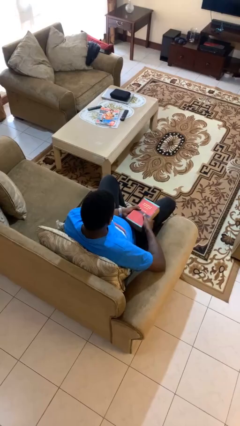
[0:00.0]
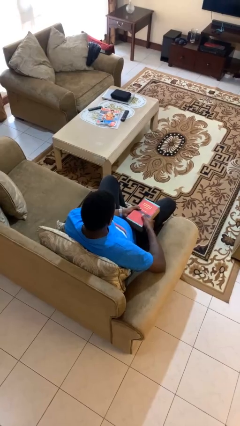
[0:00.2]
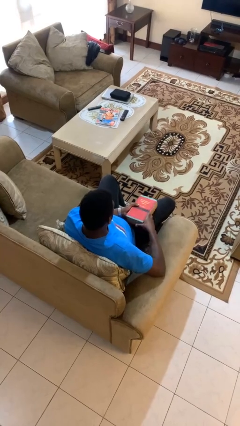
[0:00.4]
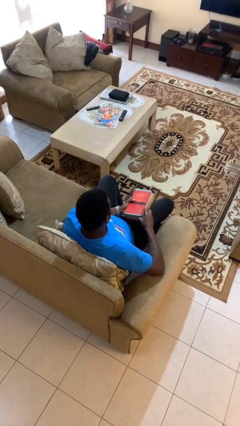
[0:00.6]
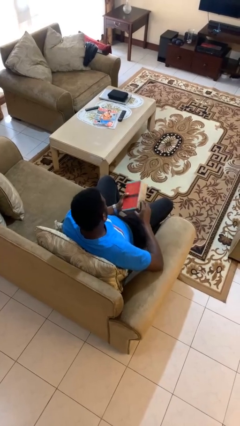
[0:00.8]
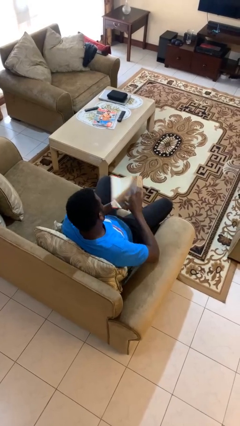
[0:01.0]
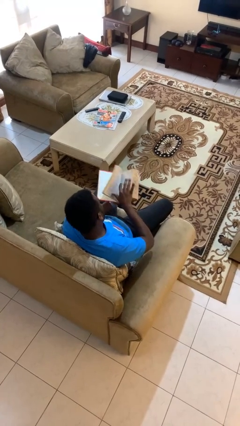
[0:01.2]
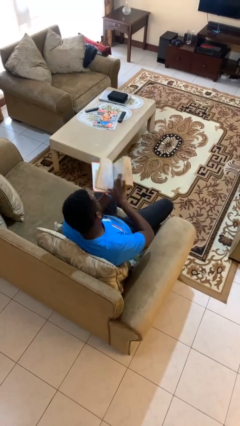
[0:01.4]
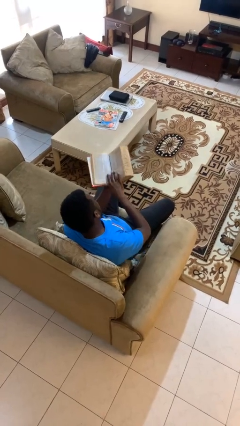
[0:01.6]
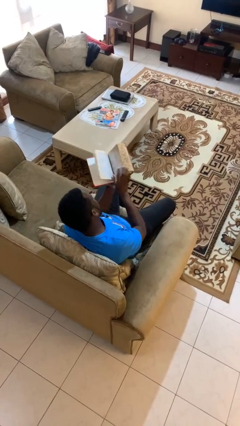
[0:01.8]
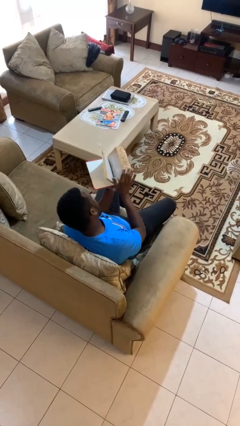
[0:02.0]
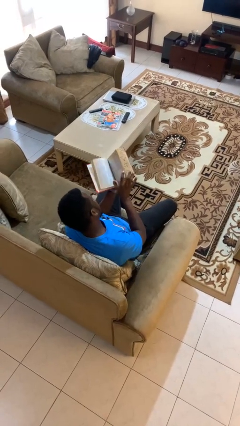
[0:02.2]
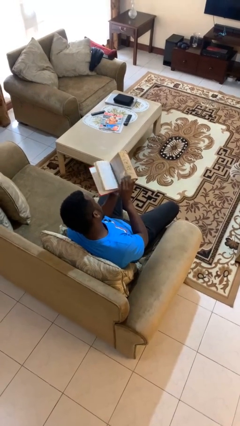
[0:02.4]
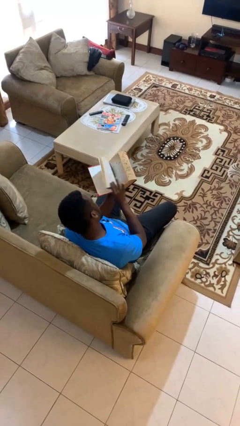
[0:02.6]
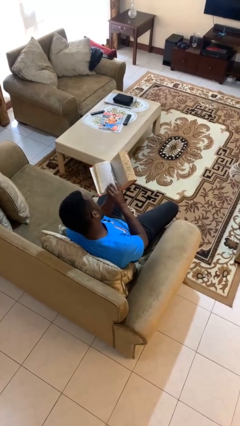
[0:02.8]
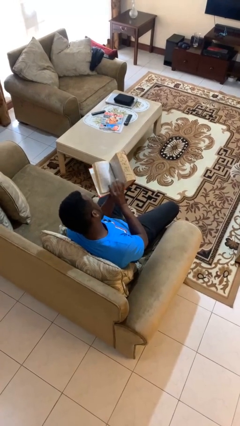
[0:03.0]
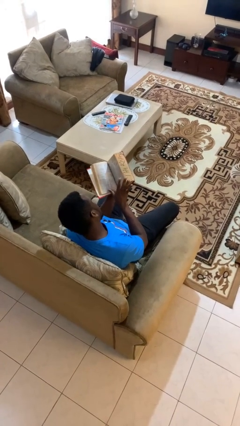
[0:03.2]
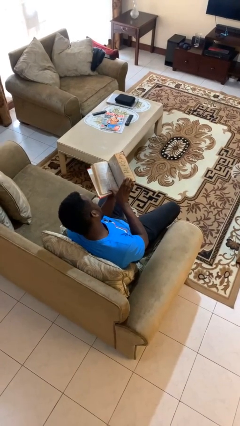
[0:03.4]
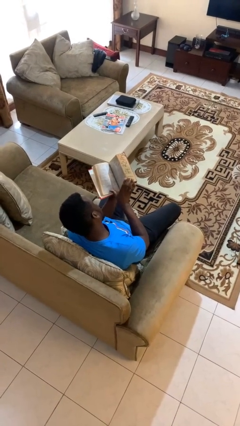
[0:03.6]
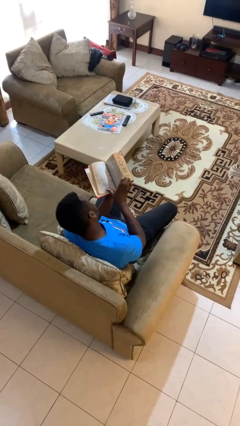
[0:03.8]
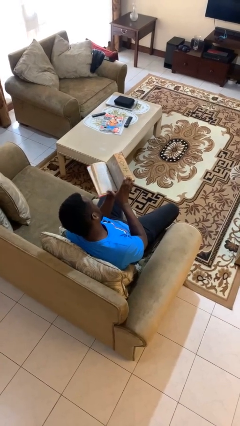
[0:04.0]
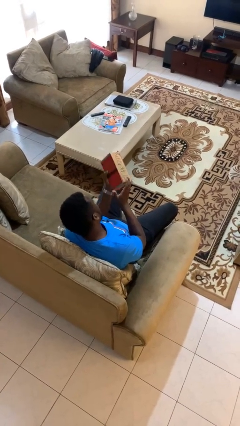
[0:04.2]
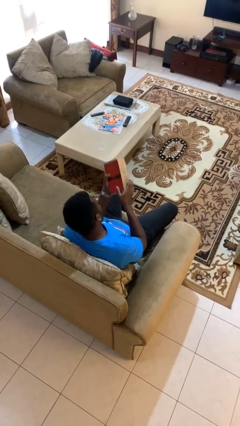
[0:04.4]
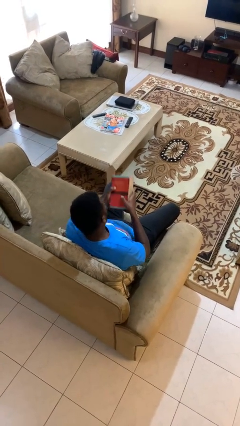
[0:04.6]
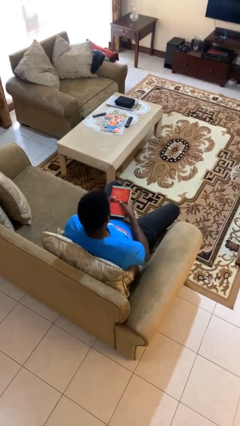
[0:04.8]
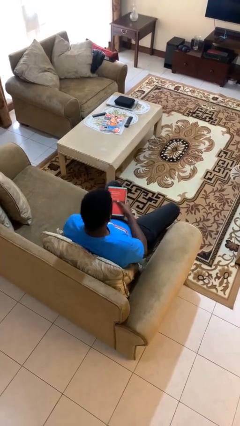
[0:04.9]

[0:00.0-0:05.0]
person reads book

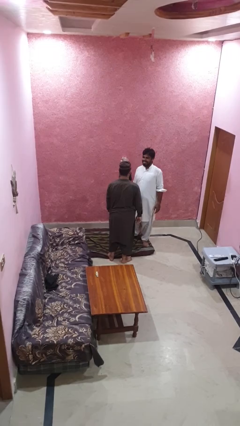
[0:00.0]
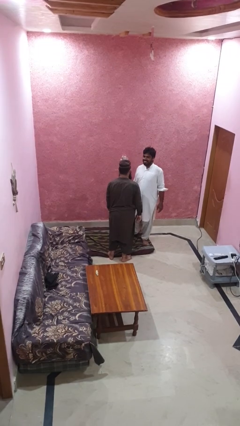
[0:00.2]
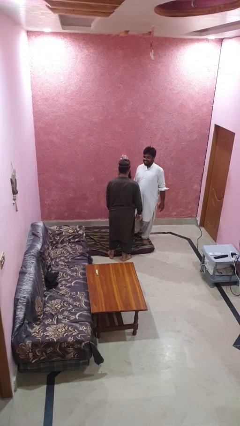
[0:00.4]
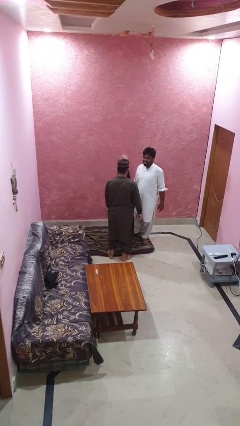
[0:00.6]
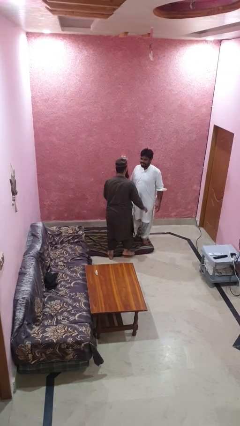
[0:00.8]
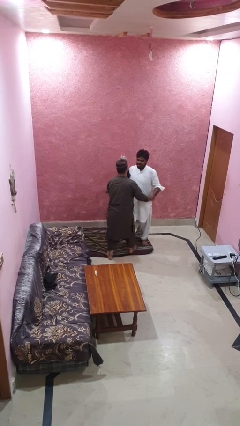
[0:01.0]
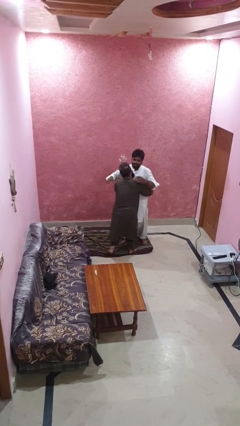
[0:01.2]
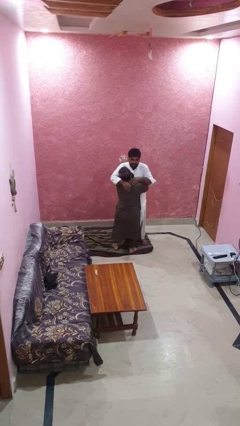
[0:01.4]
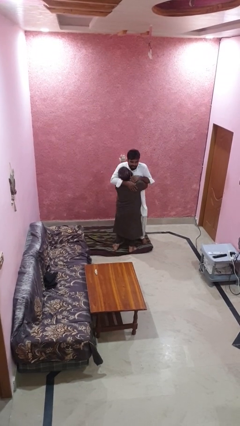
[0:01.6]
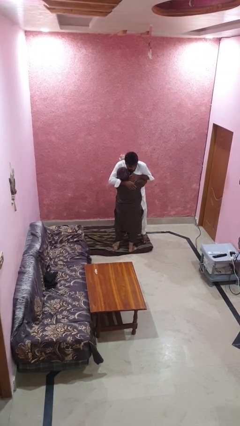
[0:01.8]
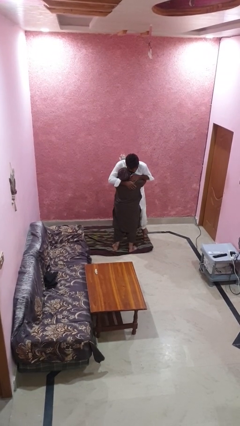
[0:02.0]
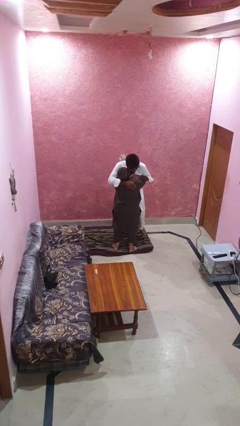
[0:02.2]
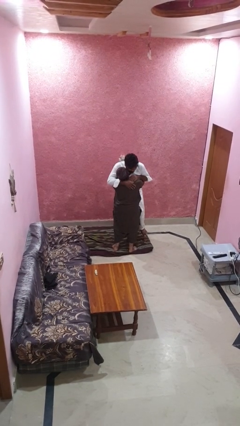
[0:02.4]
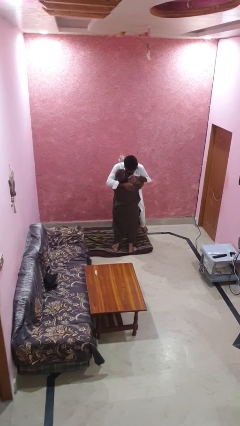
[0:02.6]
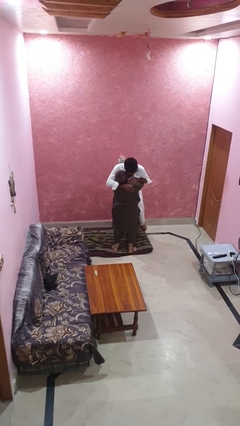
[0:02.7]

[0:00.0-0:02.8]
person picks up person

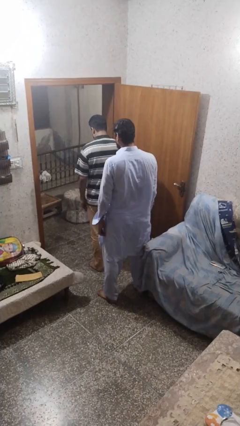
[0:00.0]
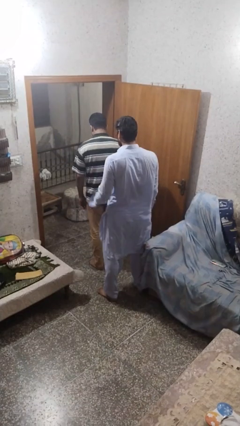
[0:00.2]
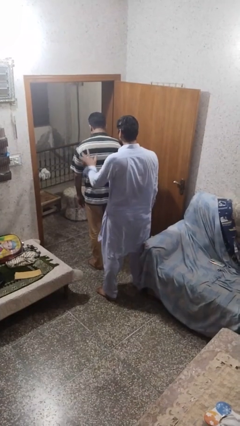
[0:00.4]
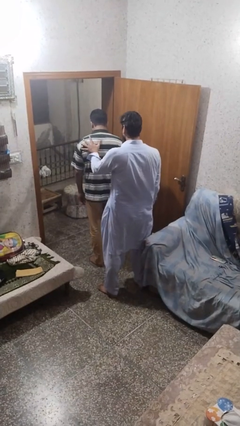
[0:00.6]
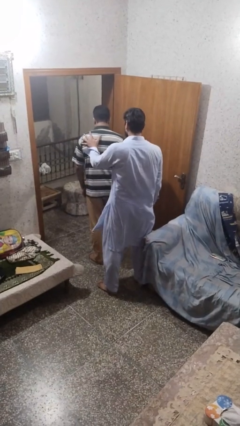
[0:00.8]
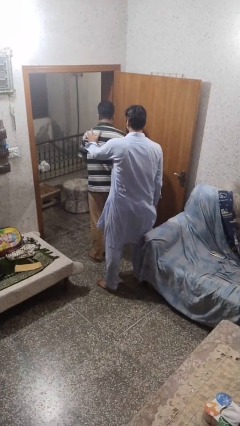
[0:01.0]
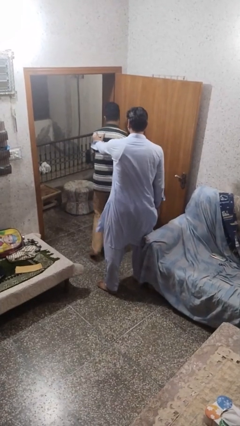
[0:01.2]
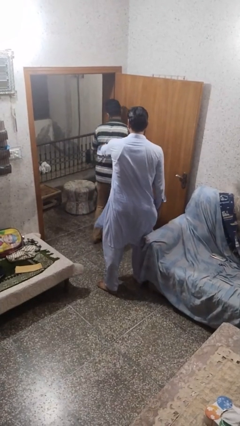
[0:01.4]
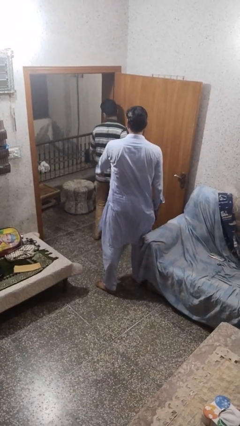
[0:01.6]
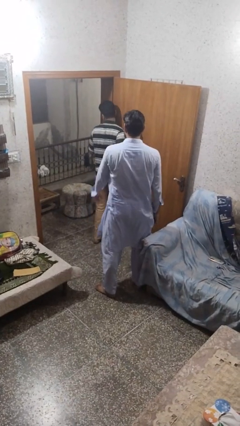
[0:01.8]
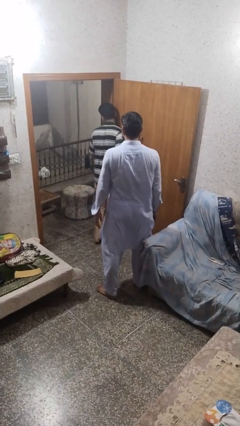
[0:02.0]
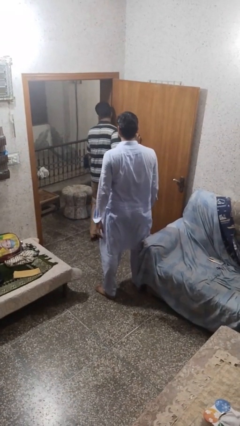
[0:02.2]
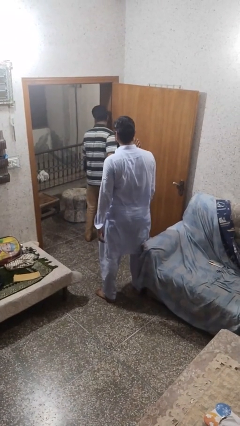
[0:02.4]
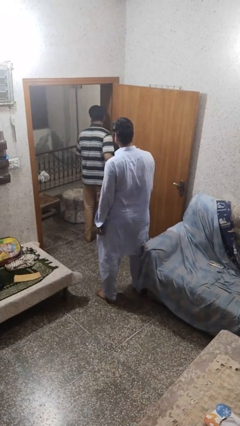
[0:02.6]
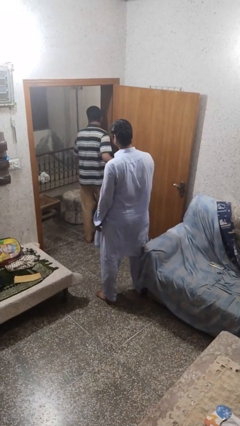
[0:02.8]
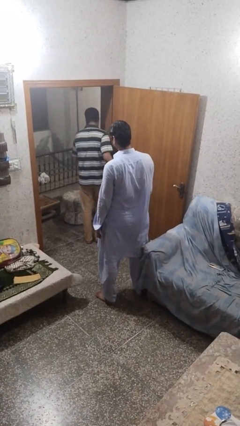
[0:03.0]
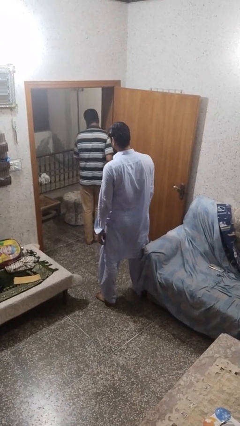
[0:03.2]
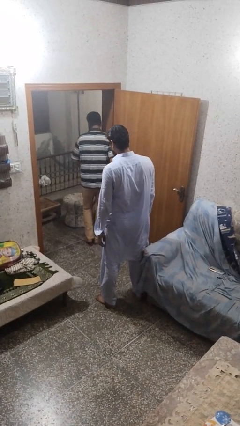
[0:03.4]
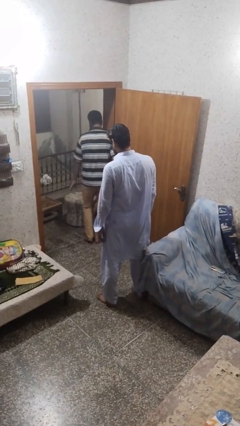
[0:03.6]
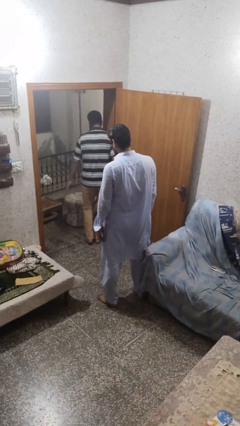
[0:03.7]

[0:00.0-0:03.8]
person shoves person

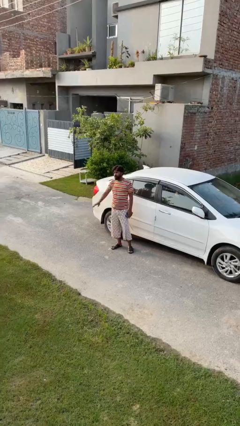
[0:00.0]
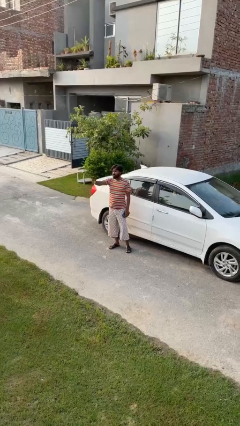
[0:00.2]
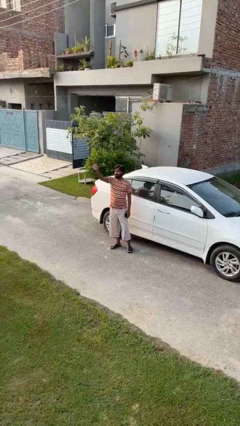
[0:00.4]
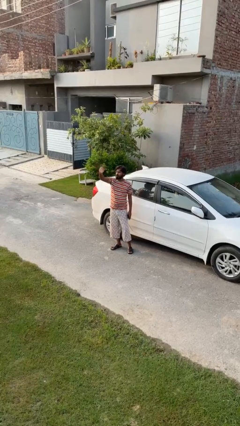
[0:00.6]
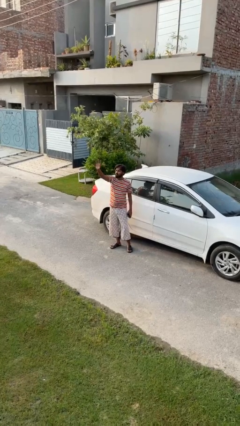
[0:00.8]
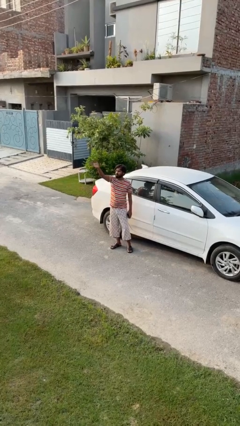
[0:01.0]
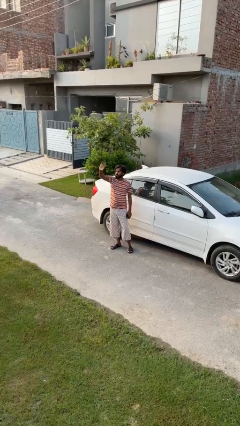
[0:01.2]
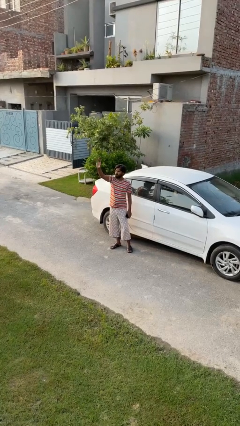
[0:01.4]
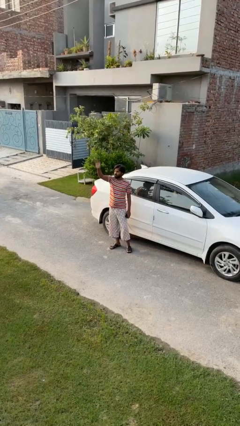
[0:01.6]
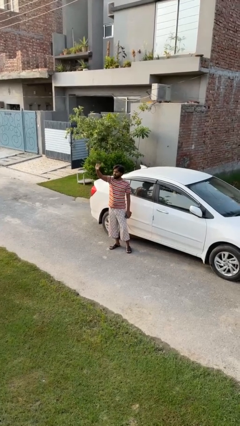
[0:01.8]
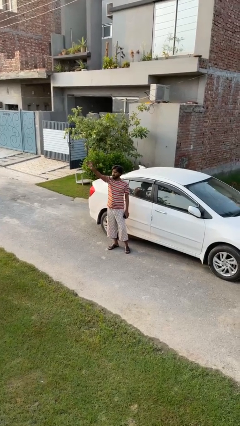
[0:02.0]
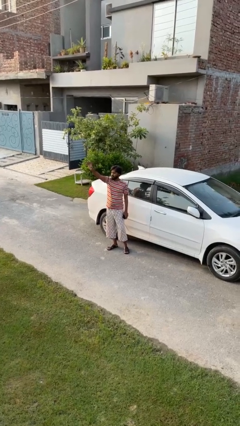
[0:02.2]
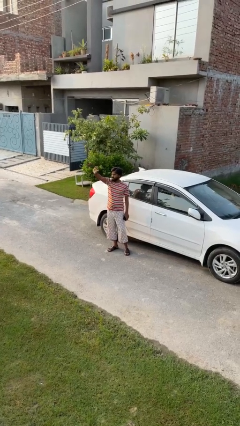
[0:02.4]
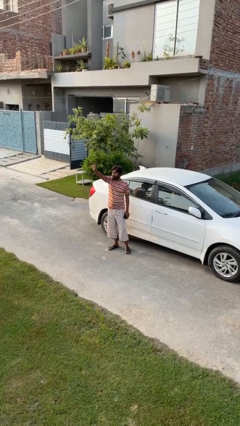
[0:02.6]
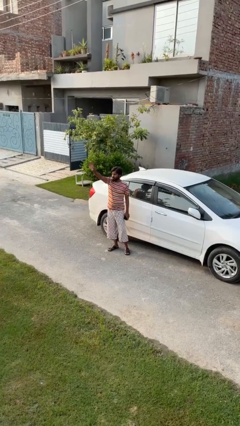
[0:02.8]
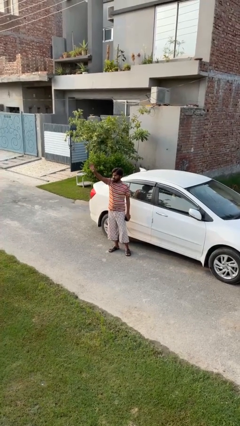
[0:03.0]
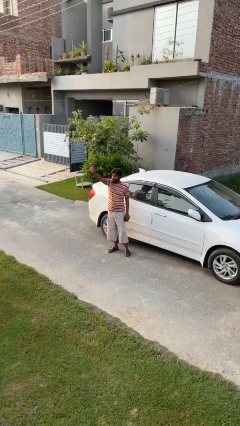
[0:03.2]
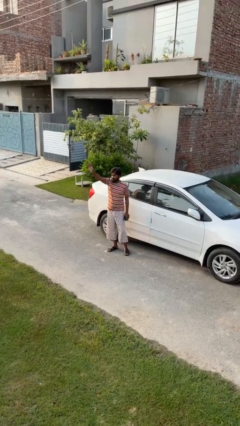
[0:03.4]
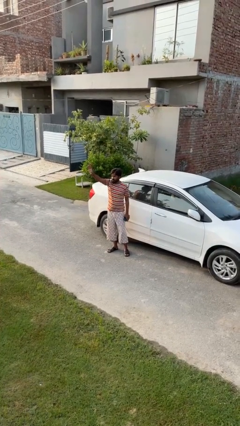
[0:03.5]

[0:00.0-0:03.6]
person waves at person

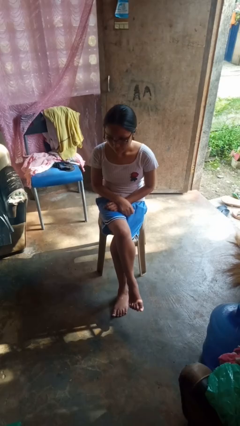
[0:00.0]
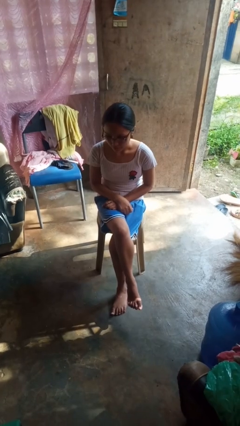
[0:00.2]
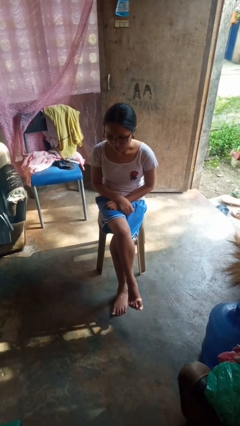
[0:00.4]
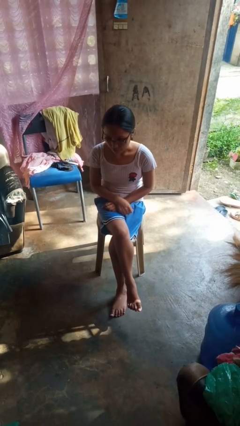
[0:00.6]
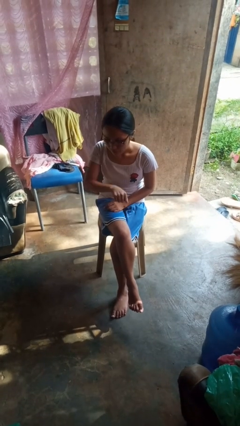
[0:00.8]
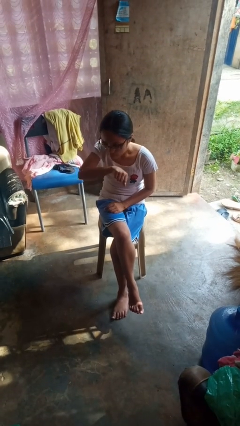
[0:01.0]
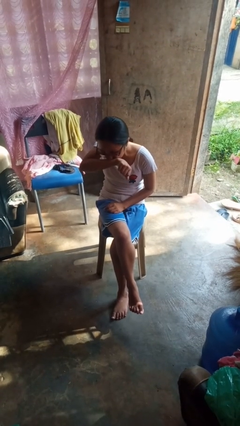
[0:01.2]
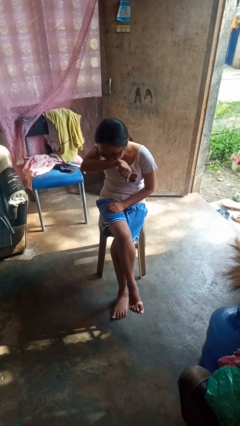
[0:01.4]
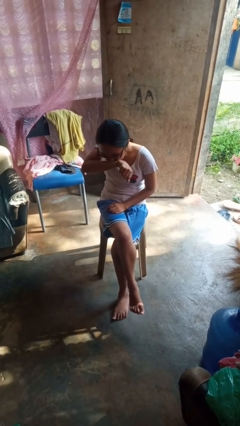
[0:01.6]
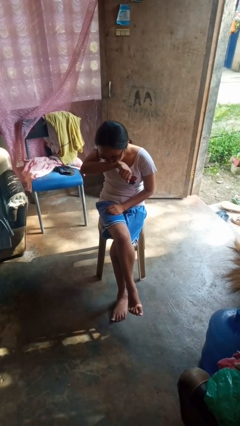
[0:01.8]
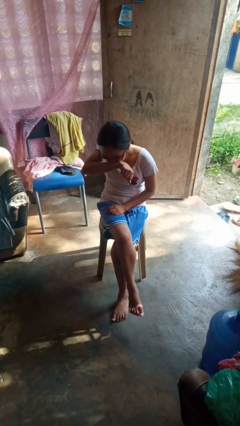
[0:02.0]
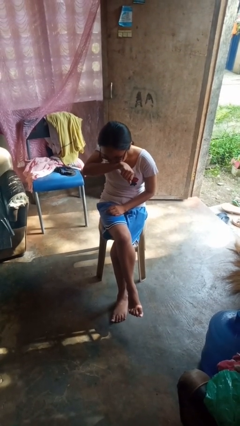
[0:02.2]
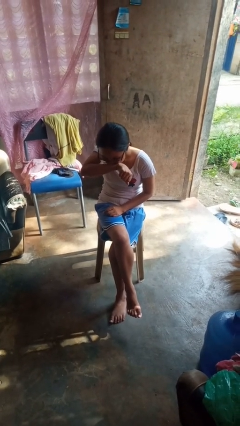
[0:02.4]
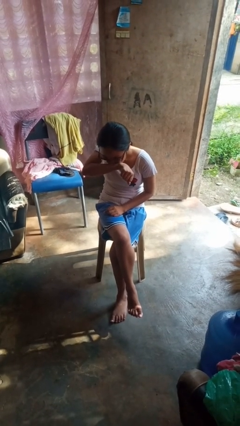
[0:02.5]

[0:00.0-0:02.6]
person sneezes into arm
